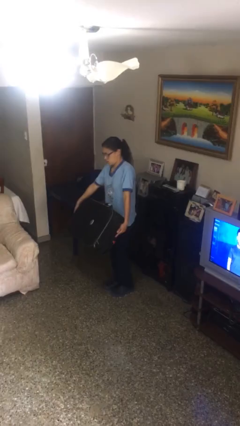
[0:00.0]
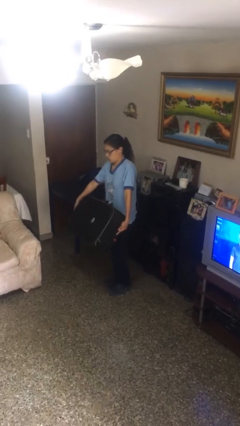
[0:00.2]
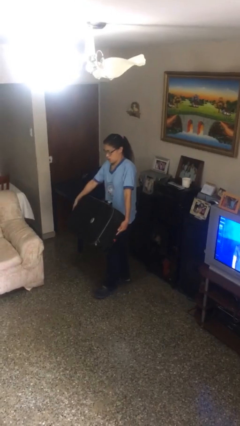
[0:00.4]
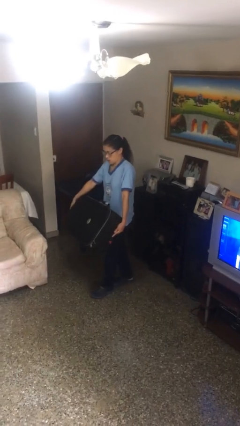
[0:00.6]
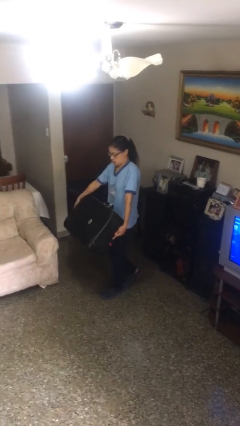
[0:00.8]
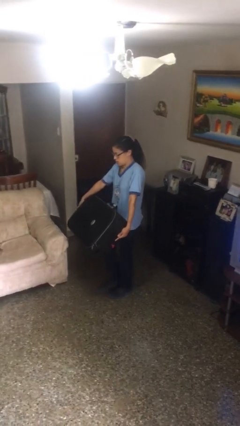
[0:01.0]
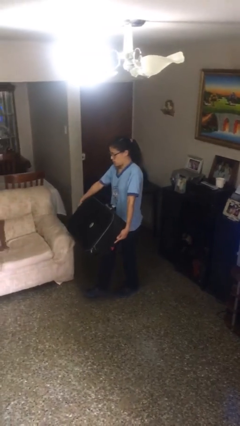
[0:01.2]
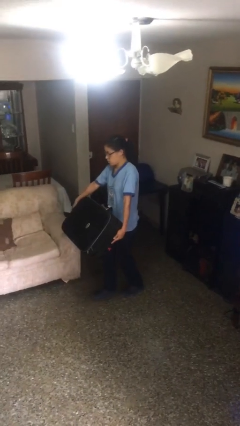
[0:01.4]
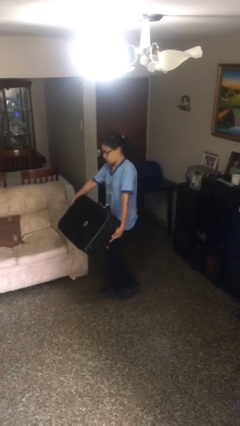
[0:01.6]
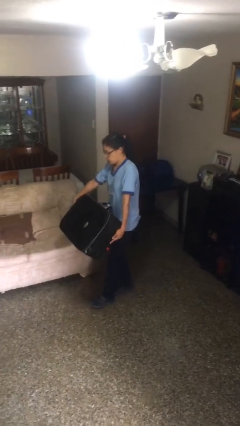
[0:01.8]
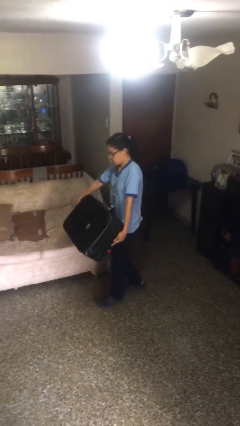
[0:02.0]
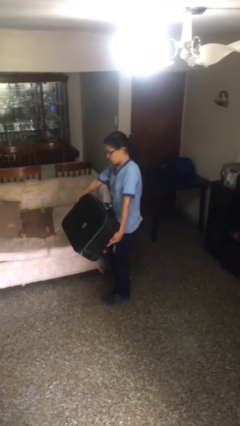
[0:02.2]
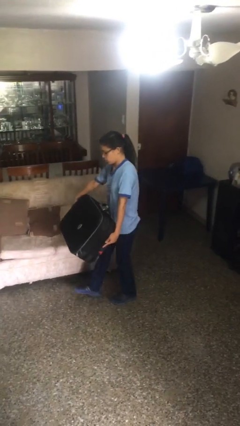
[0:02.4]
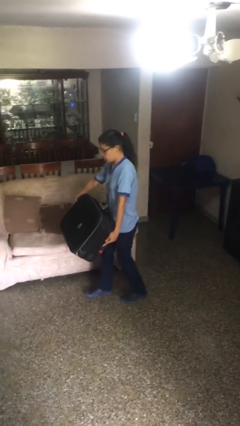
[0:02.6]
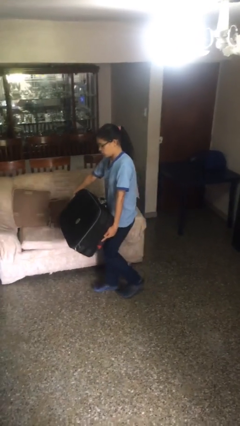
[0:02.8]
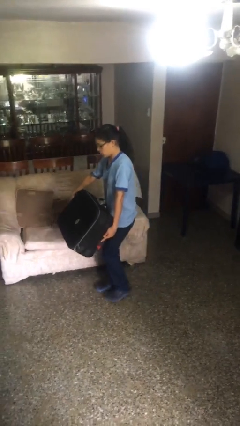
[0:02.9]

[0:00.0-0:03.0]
person carries heavy object

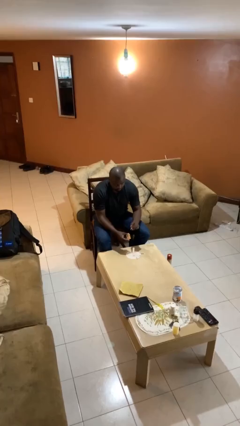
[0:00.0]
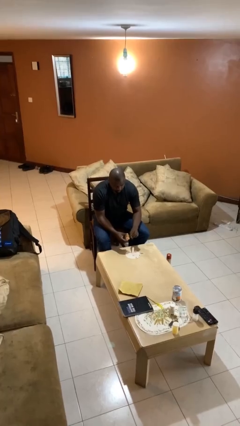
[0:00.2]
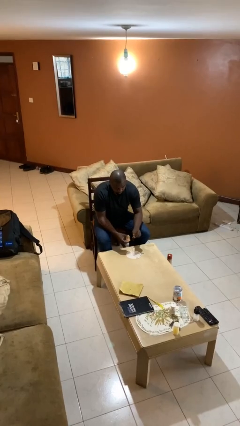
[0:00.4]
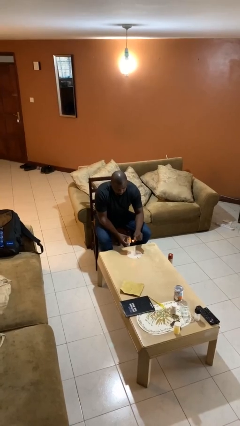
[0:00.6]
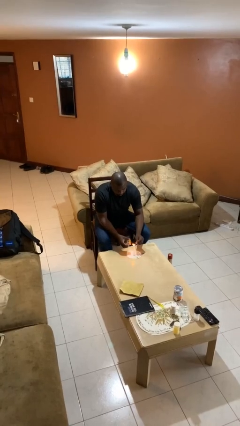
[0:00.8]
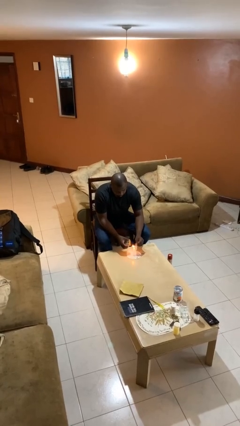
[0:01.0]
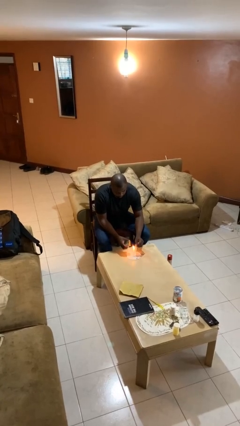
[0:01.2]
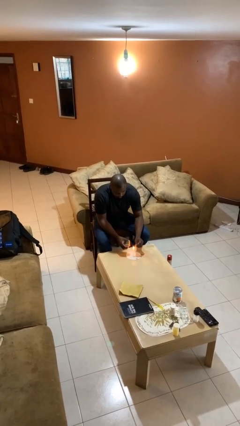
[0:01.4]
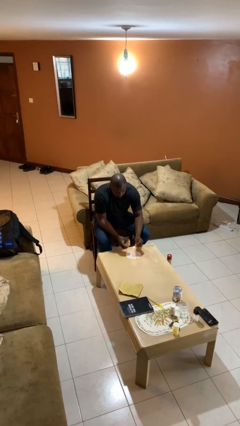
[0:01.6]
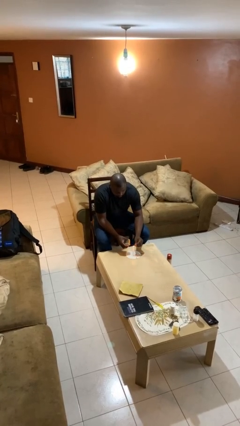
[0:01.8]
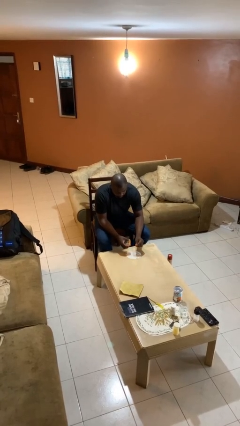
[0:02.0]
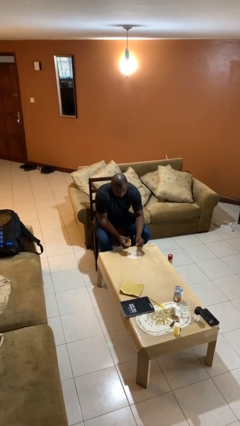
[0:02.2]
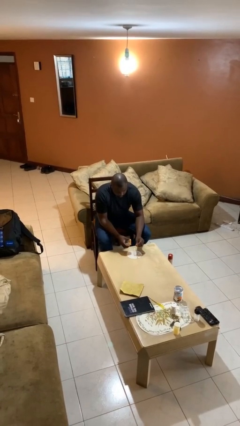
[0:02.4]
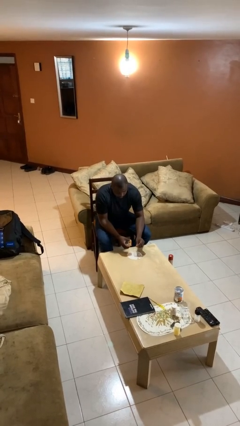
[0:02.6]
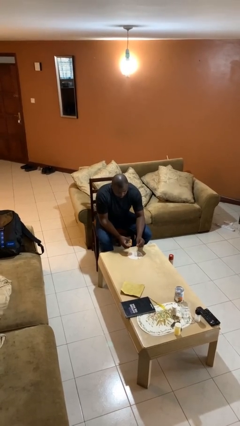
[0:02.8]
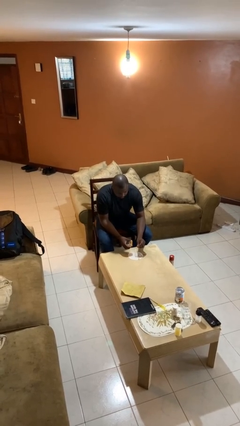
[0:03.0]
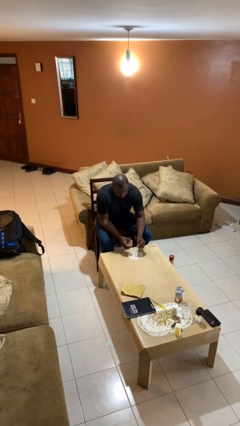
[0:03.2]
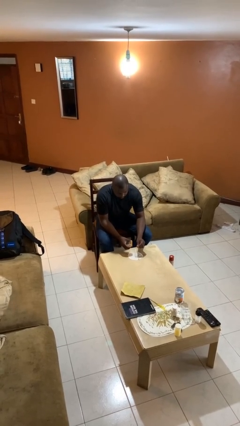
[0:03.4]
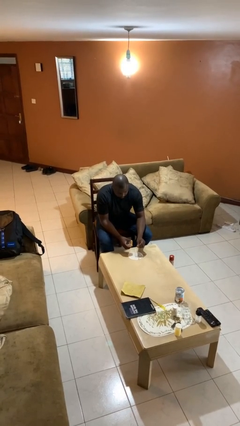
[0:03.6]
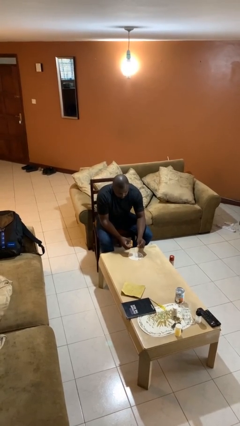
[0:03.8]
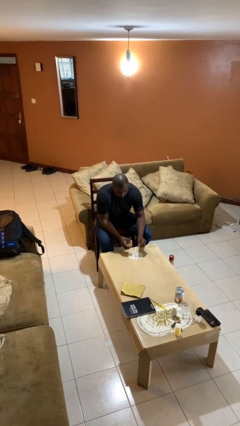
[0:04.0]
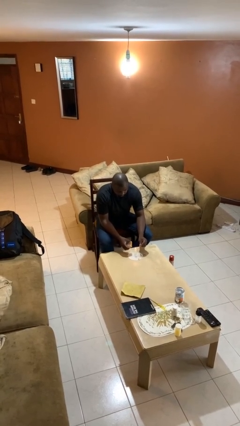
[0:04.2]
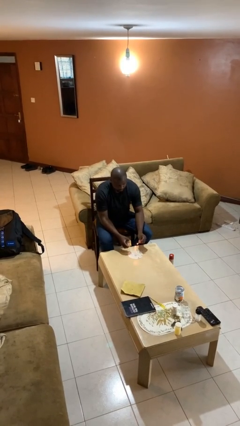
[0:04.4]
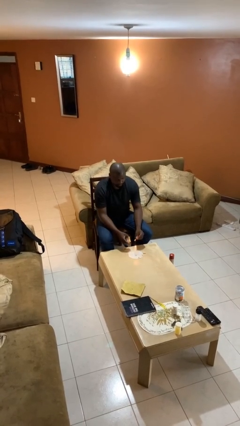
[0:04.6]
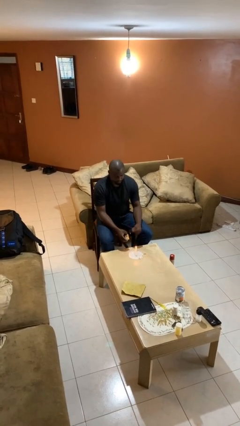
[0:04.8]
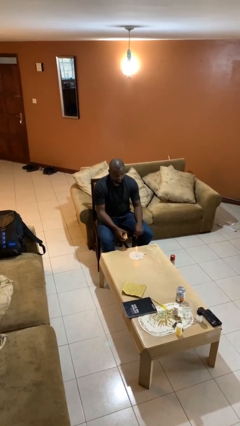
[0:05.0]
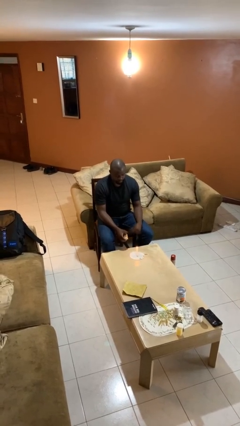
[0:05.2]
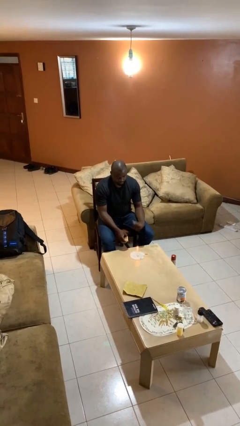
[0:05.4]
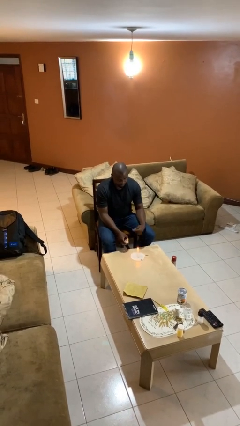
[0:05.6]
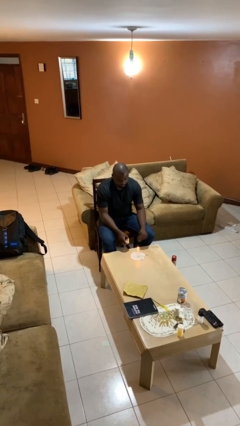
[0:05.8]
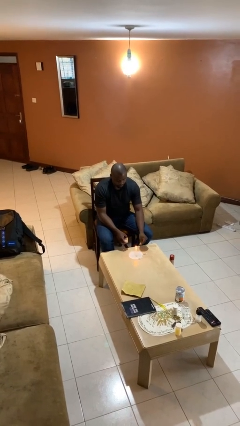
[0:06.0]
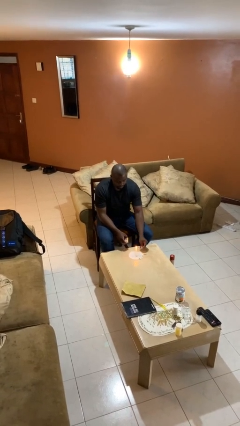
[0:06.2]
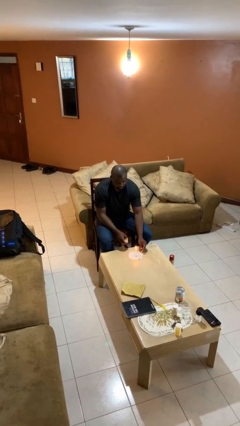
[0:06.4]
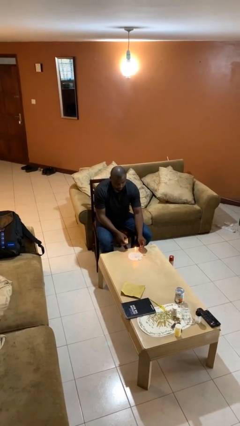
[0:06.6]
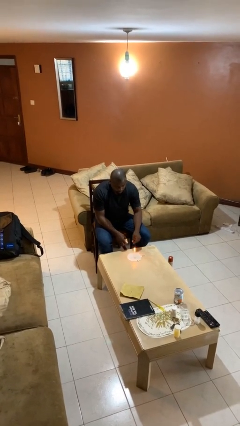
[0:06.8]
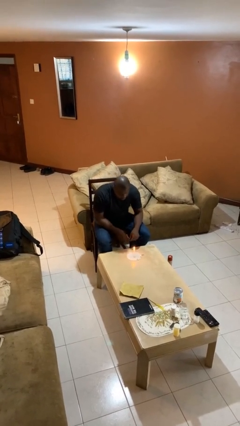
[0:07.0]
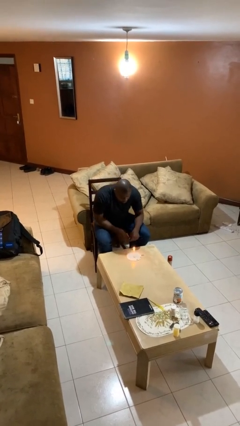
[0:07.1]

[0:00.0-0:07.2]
person lights candle

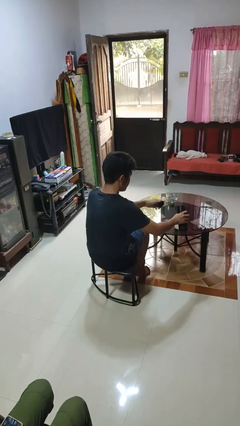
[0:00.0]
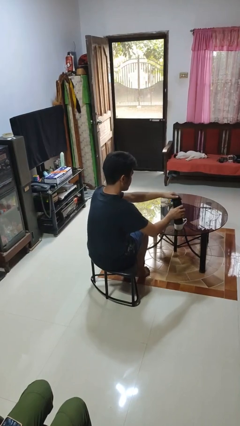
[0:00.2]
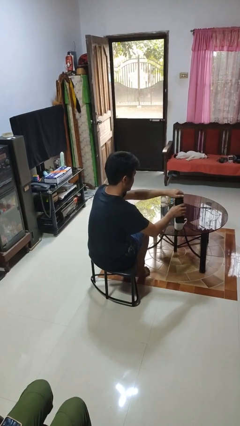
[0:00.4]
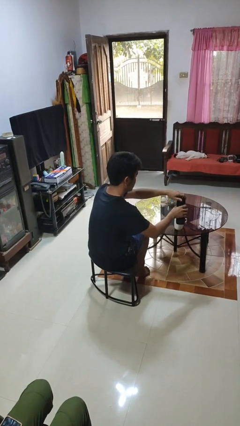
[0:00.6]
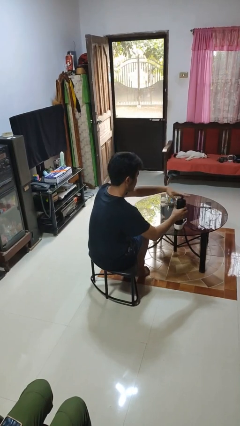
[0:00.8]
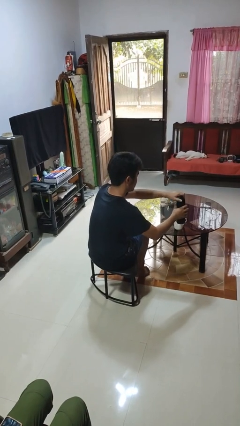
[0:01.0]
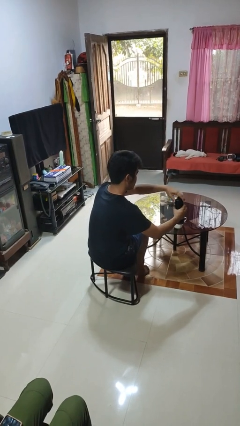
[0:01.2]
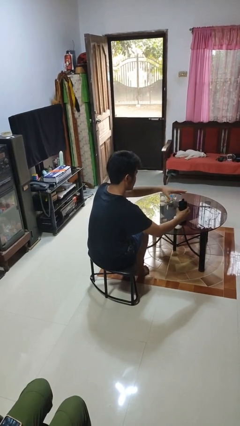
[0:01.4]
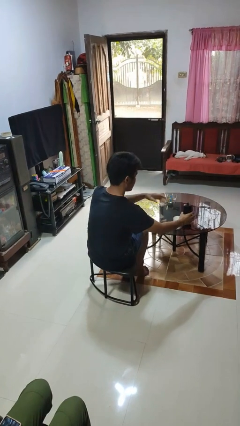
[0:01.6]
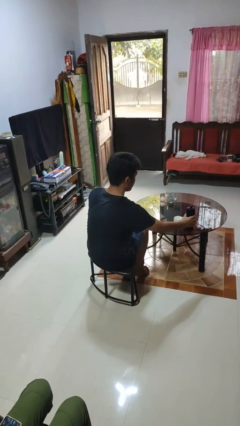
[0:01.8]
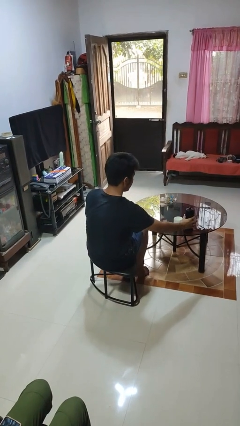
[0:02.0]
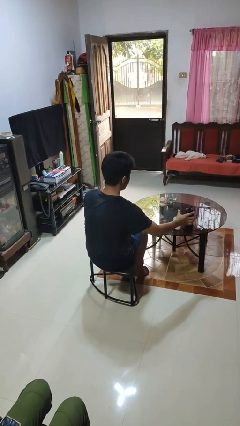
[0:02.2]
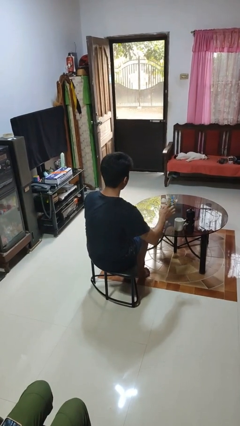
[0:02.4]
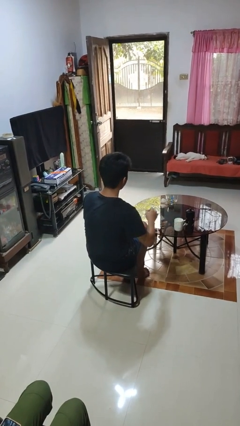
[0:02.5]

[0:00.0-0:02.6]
person screws lid to bottle

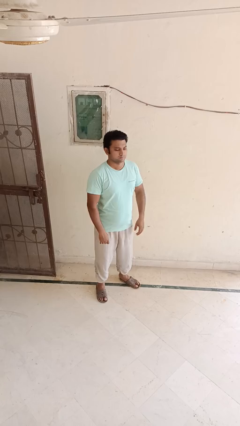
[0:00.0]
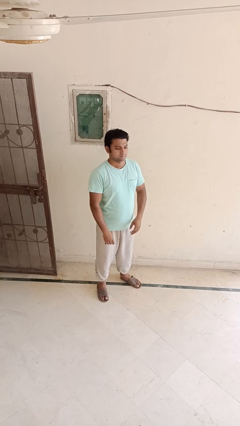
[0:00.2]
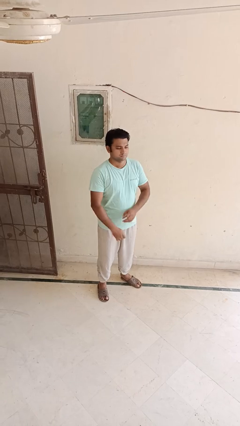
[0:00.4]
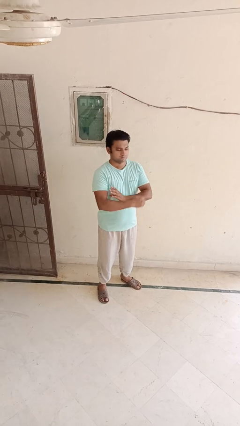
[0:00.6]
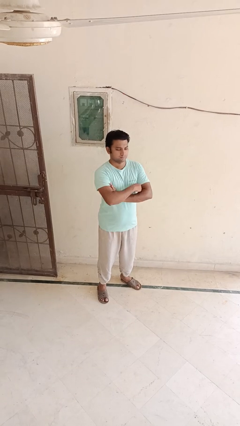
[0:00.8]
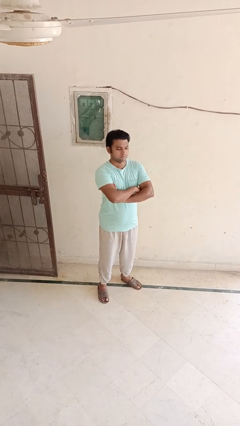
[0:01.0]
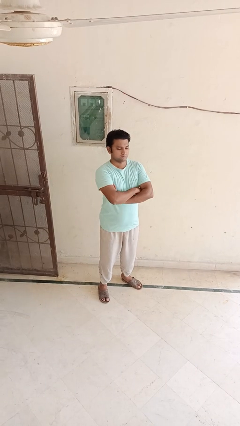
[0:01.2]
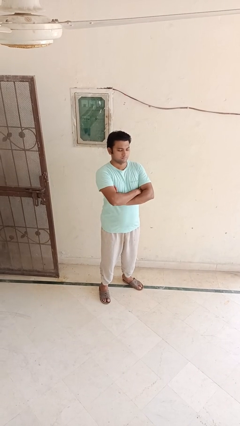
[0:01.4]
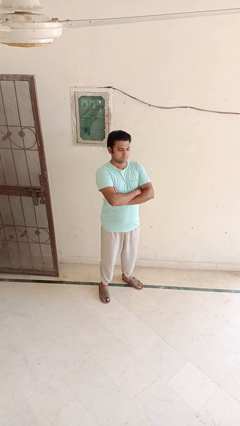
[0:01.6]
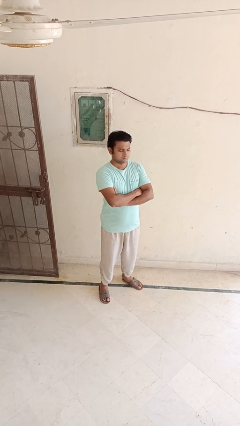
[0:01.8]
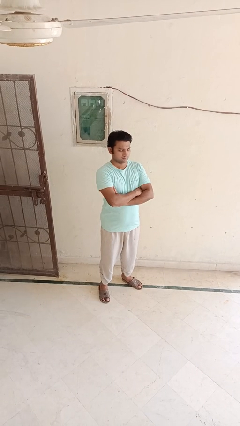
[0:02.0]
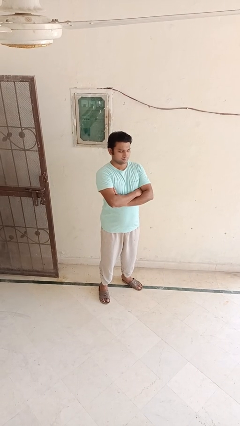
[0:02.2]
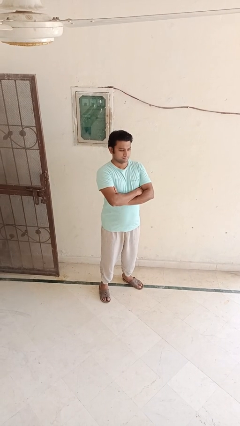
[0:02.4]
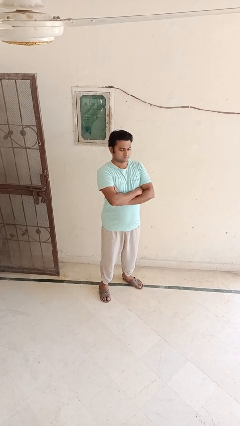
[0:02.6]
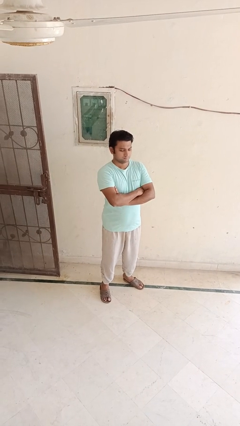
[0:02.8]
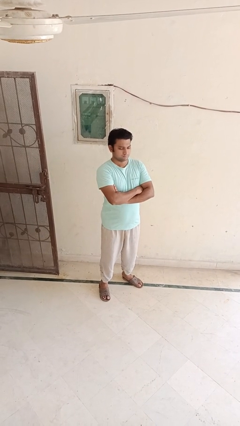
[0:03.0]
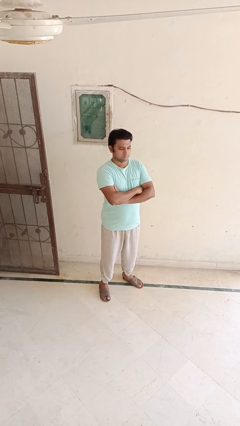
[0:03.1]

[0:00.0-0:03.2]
person crosses arms

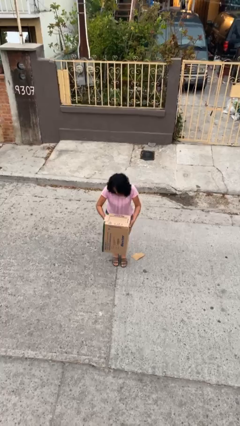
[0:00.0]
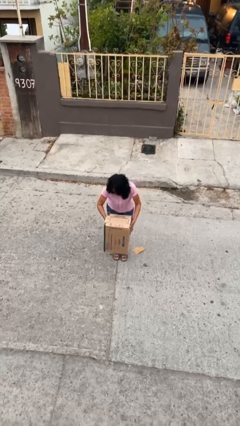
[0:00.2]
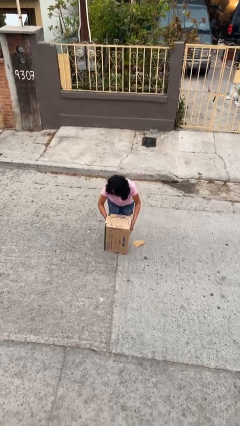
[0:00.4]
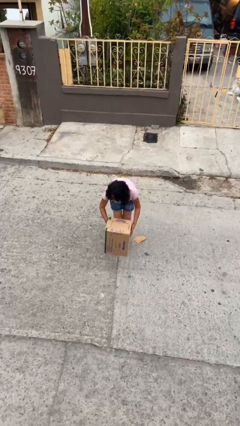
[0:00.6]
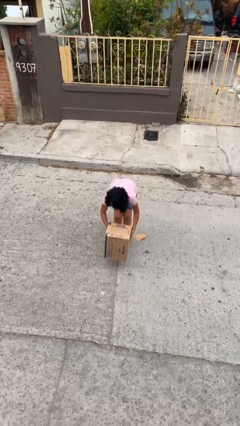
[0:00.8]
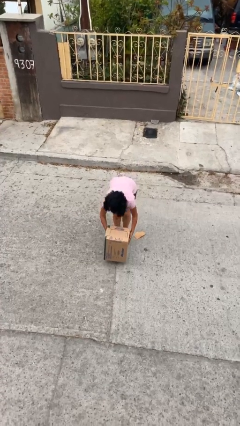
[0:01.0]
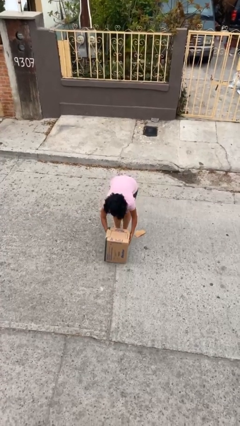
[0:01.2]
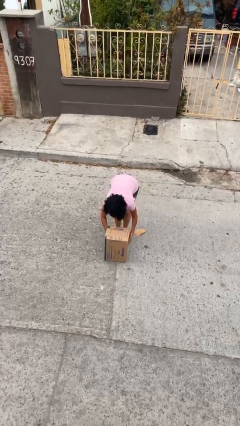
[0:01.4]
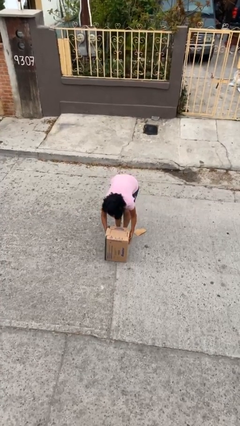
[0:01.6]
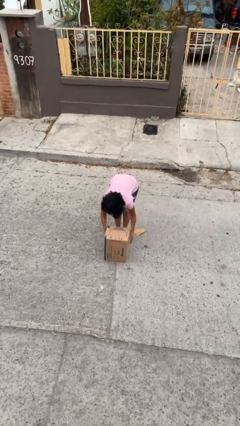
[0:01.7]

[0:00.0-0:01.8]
person puts down object on floor
